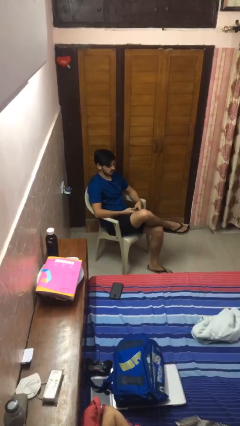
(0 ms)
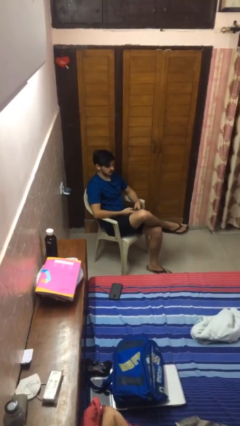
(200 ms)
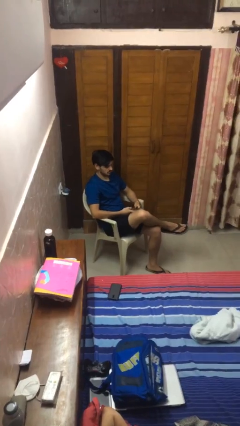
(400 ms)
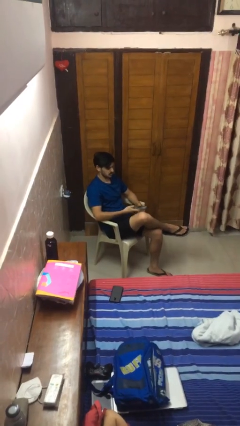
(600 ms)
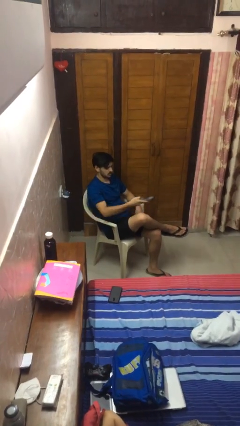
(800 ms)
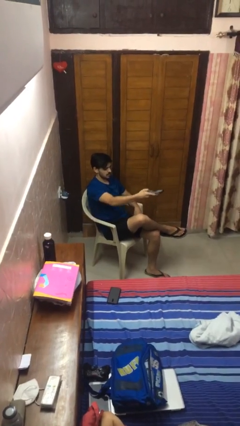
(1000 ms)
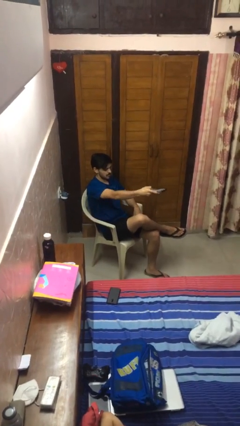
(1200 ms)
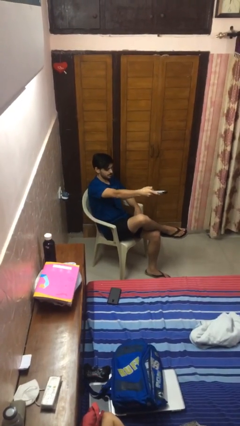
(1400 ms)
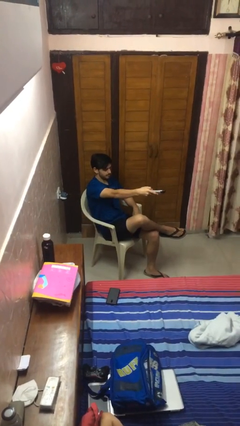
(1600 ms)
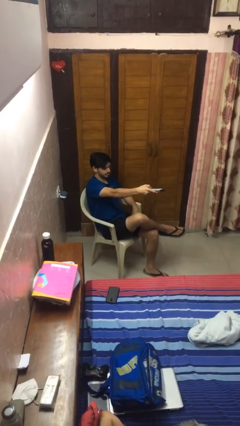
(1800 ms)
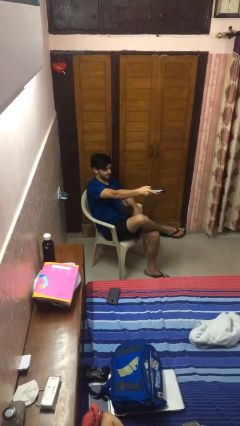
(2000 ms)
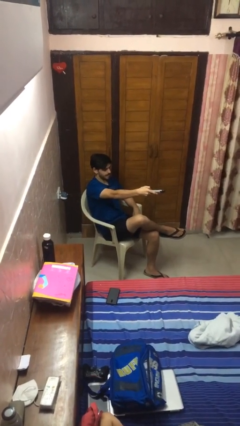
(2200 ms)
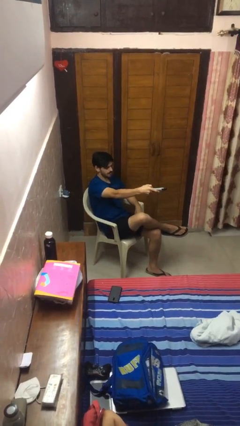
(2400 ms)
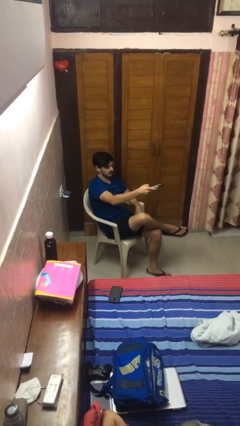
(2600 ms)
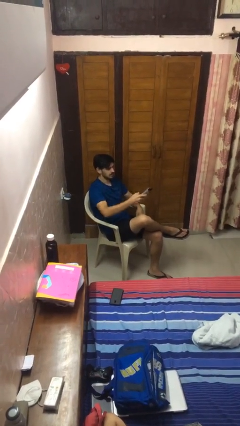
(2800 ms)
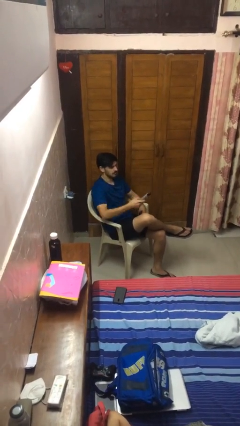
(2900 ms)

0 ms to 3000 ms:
person uses television remote

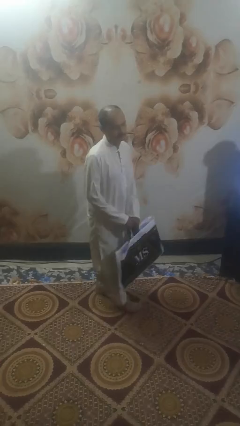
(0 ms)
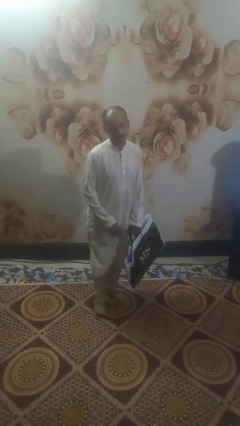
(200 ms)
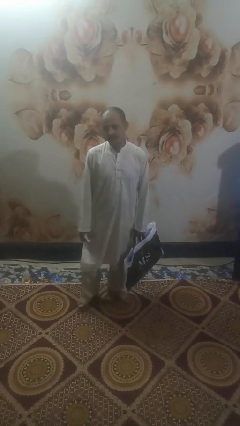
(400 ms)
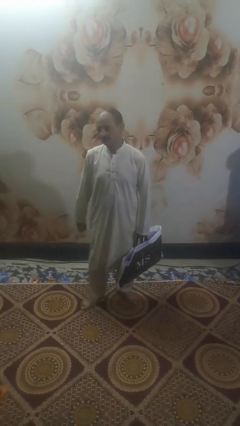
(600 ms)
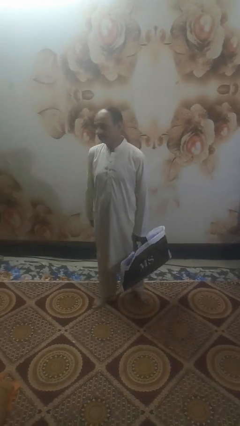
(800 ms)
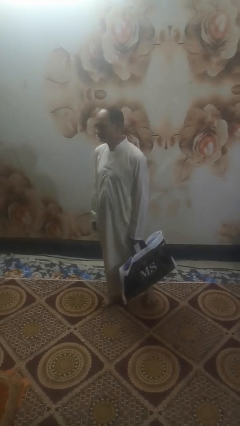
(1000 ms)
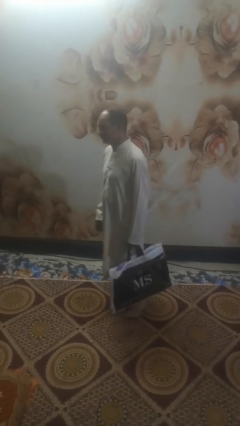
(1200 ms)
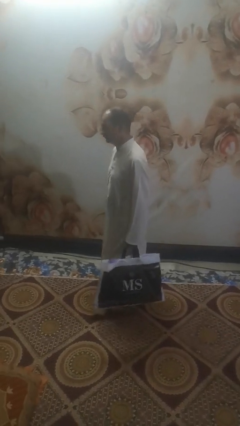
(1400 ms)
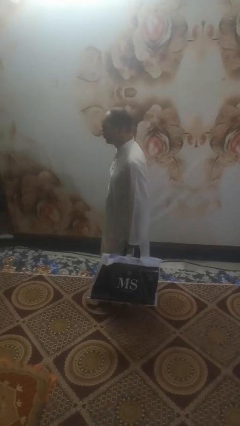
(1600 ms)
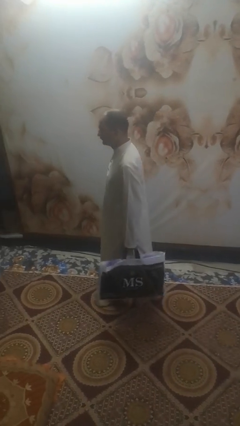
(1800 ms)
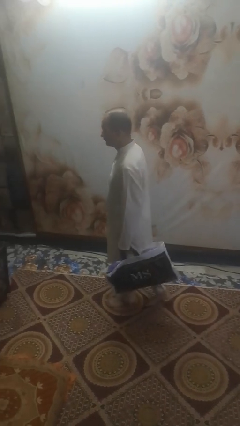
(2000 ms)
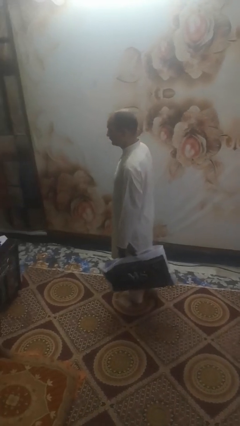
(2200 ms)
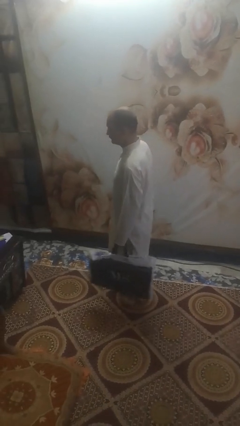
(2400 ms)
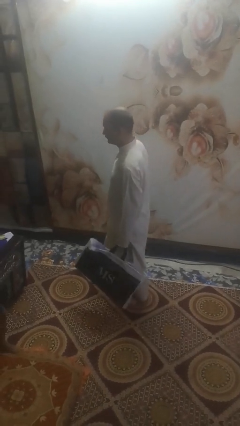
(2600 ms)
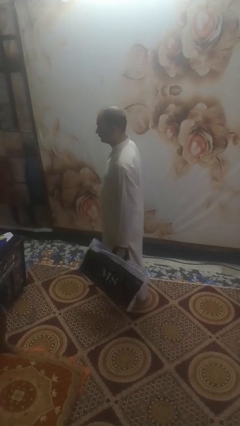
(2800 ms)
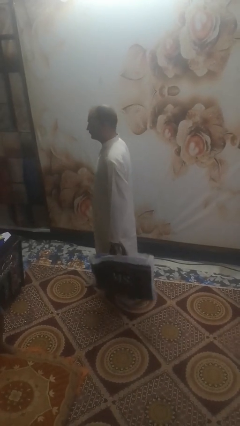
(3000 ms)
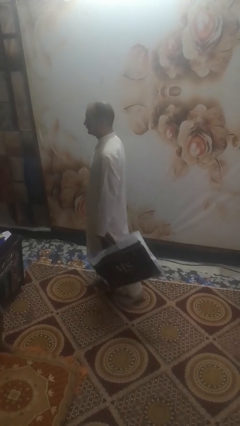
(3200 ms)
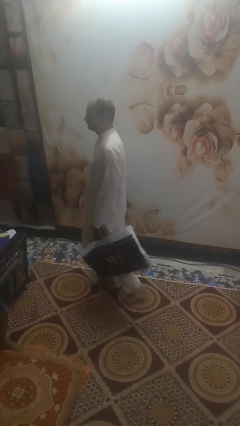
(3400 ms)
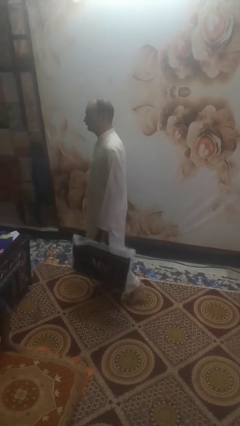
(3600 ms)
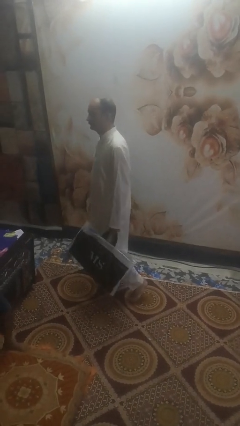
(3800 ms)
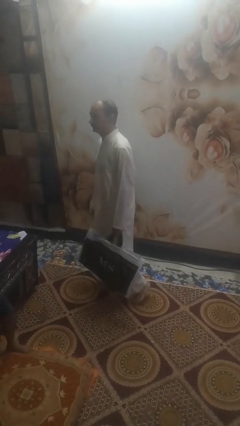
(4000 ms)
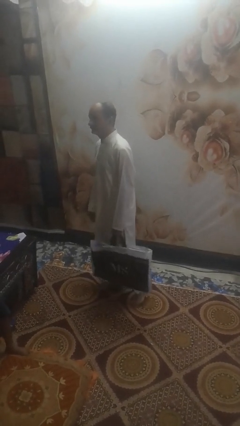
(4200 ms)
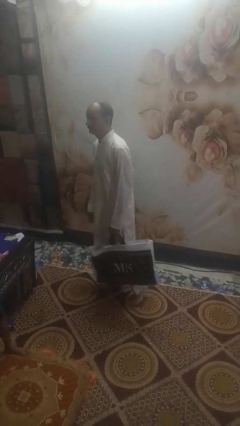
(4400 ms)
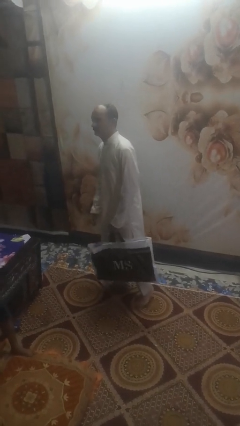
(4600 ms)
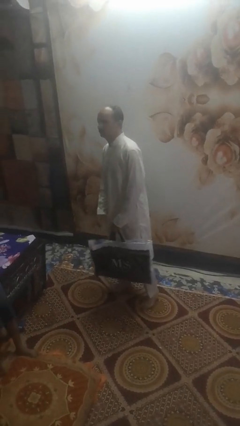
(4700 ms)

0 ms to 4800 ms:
person carries groceries

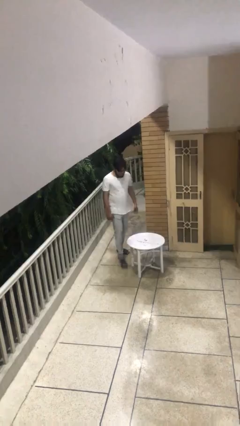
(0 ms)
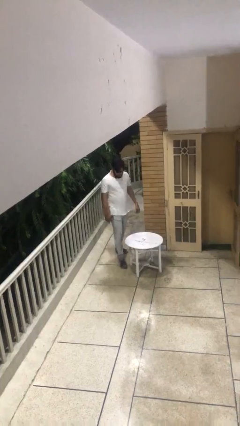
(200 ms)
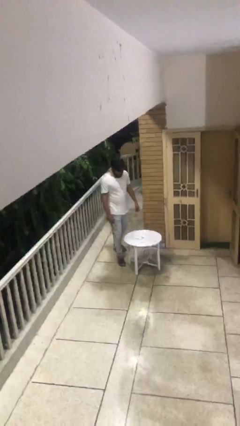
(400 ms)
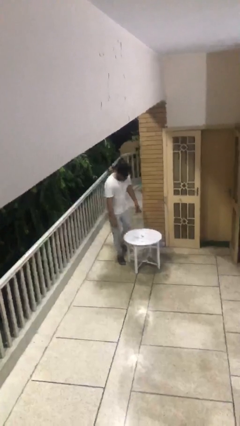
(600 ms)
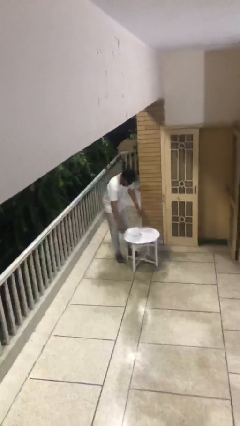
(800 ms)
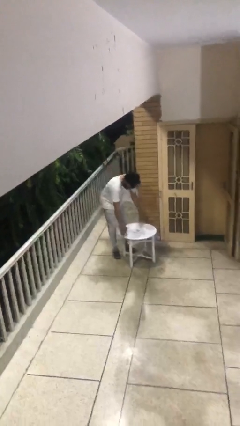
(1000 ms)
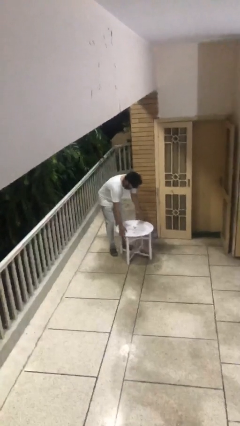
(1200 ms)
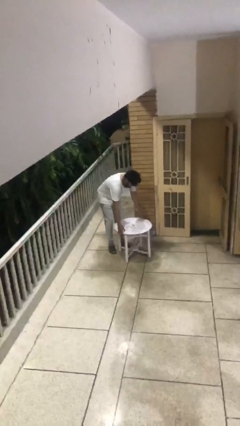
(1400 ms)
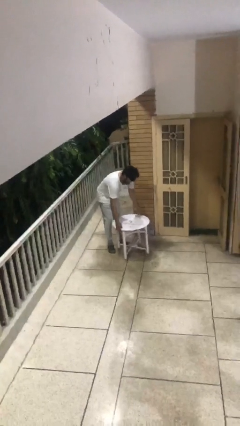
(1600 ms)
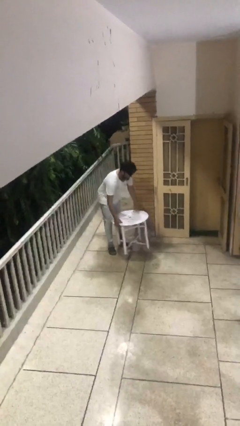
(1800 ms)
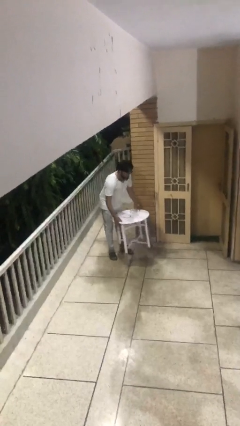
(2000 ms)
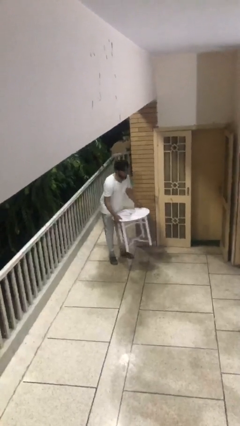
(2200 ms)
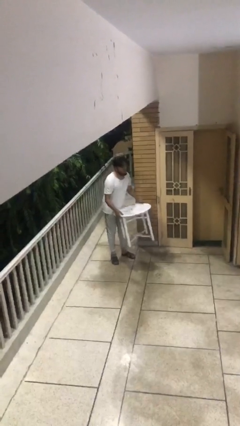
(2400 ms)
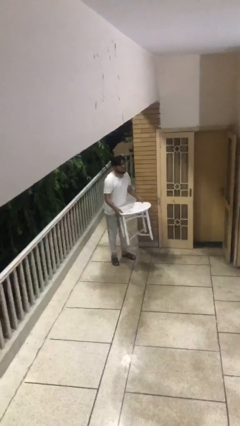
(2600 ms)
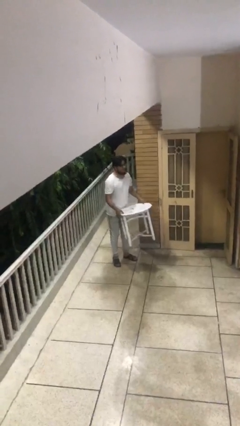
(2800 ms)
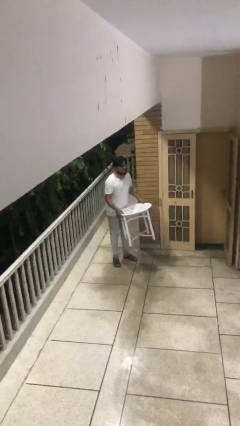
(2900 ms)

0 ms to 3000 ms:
person picks up object from floor

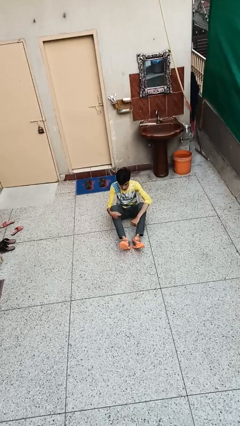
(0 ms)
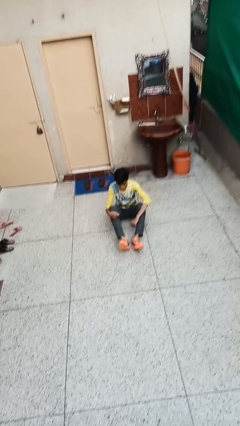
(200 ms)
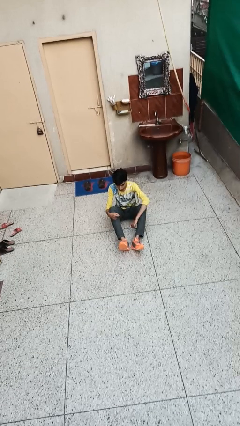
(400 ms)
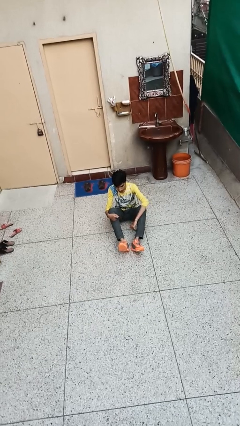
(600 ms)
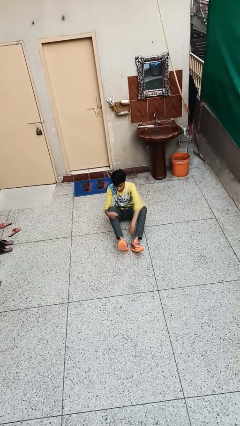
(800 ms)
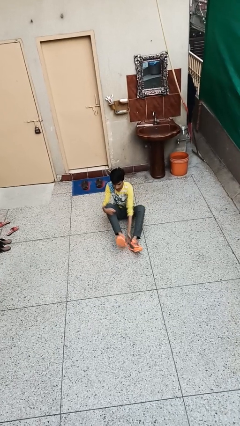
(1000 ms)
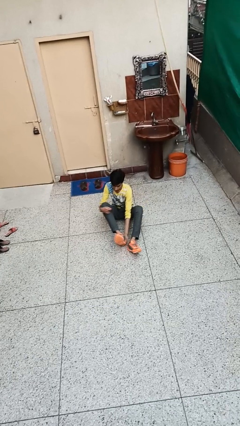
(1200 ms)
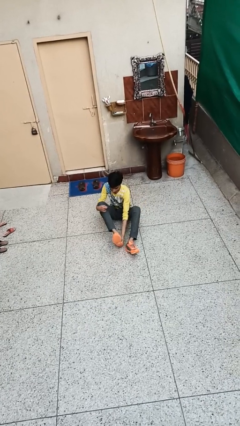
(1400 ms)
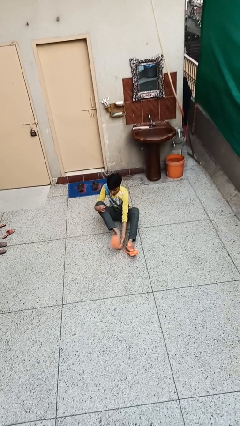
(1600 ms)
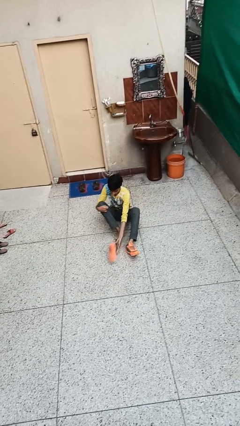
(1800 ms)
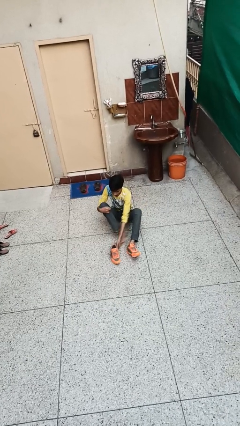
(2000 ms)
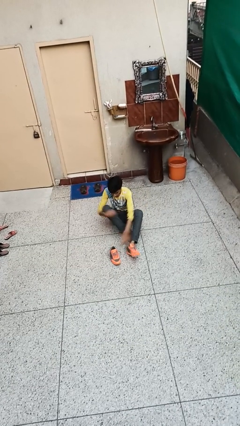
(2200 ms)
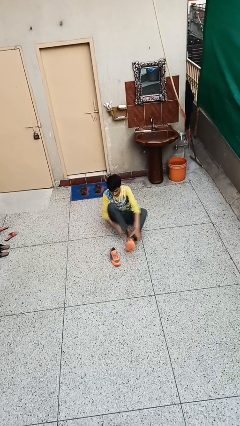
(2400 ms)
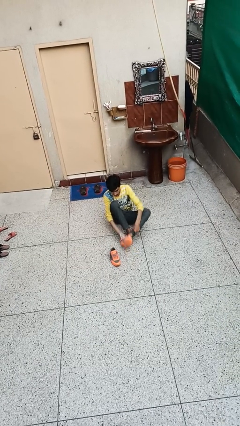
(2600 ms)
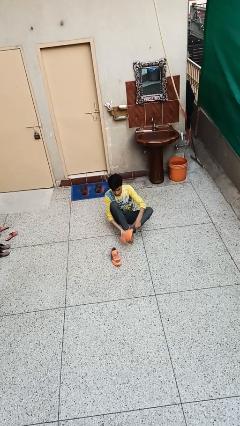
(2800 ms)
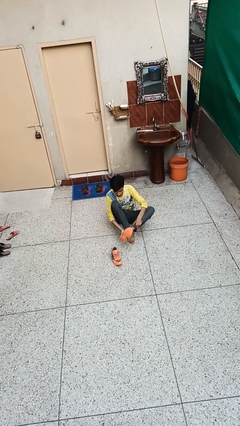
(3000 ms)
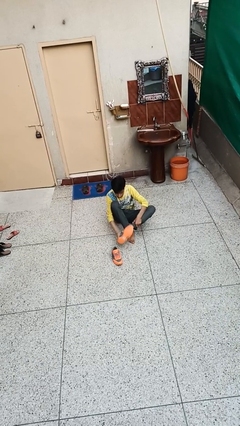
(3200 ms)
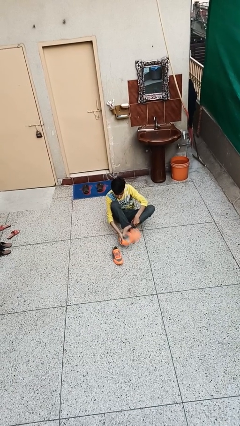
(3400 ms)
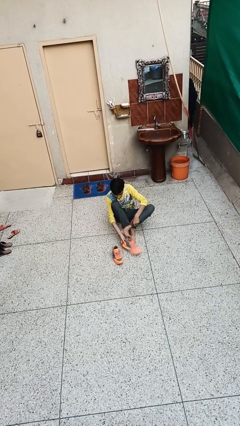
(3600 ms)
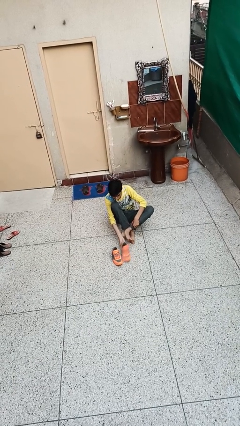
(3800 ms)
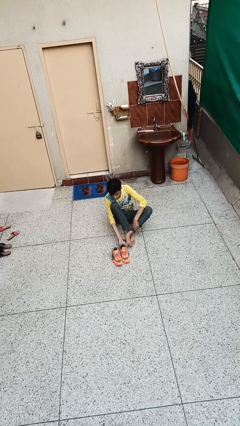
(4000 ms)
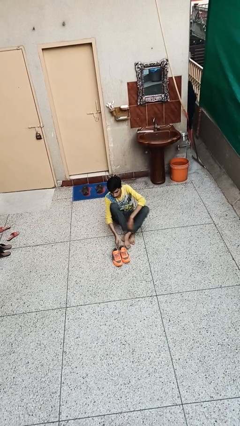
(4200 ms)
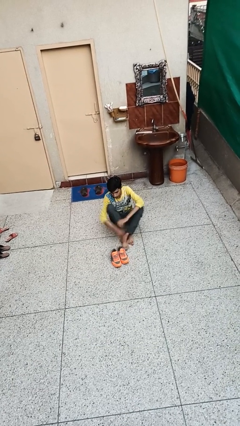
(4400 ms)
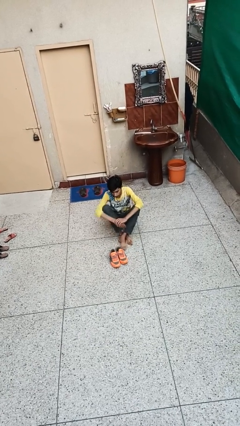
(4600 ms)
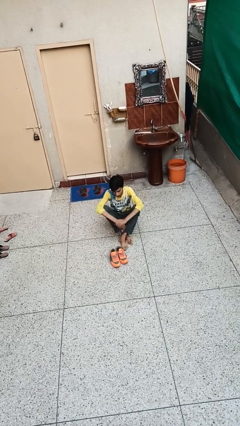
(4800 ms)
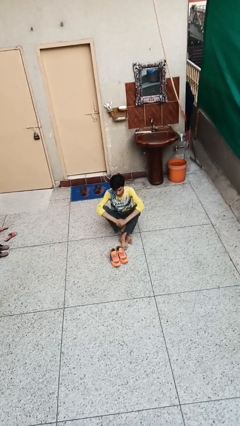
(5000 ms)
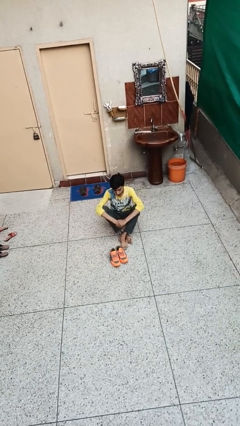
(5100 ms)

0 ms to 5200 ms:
person takes off shoes

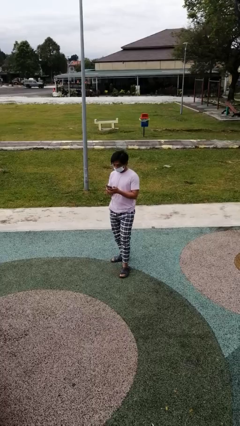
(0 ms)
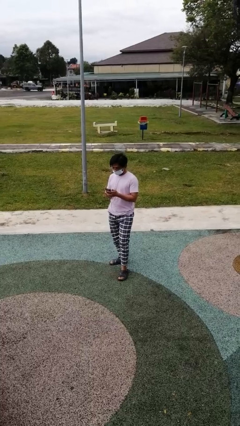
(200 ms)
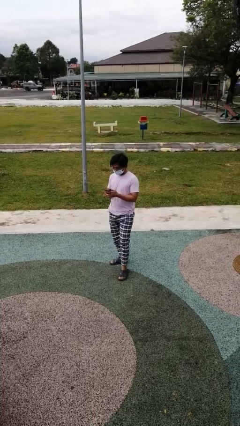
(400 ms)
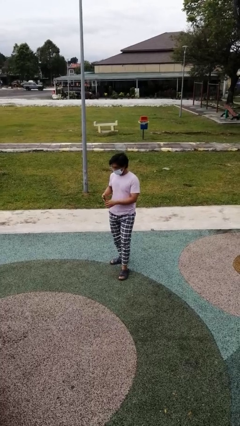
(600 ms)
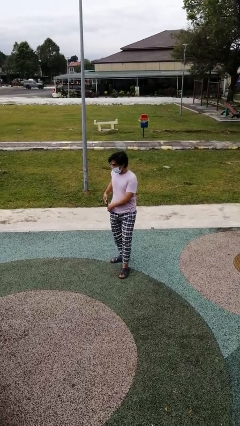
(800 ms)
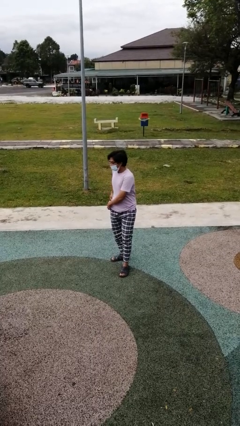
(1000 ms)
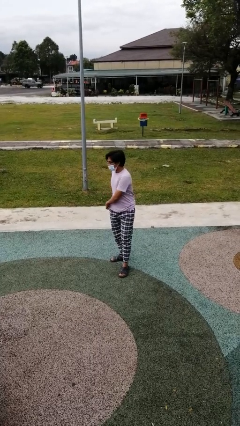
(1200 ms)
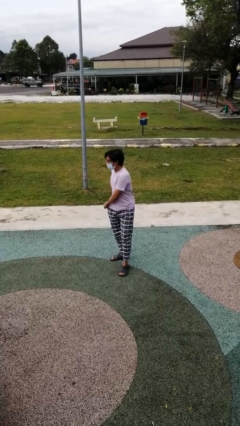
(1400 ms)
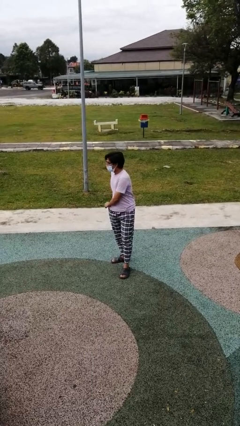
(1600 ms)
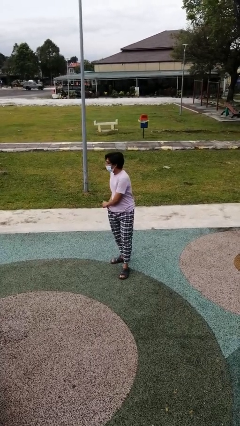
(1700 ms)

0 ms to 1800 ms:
person puts phone into pocket
